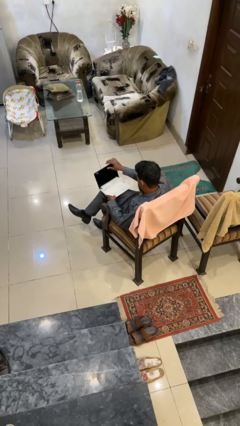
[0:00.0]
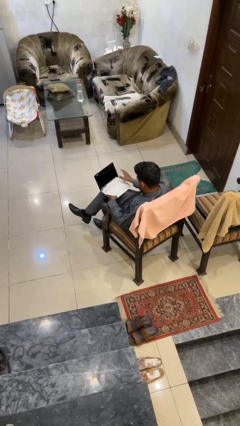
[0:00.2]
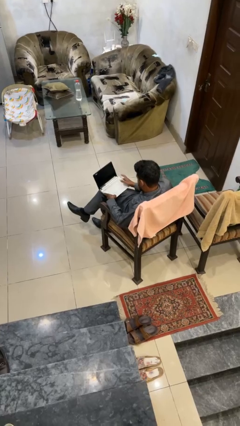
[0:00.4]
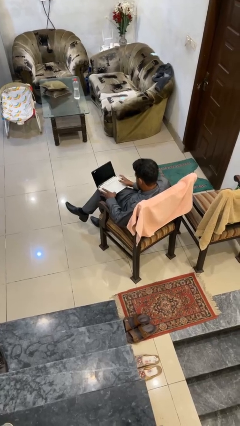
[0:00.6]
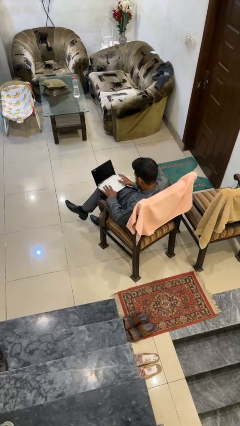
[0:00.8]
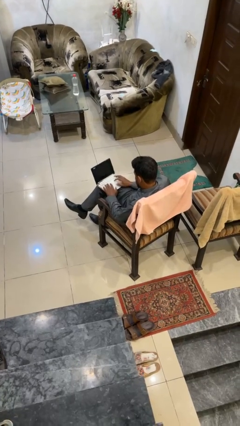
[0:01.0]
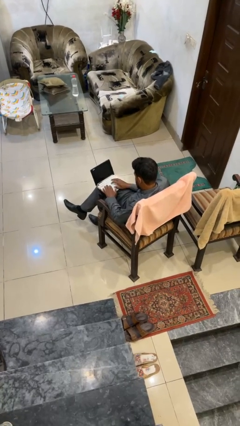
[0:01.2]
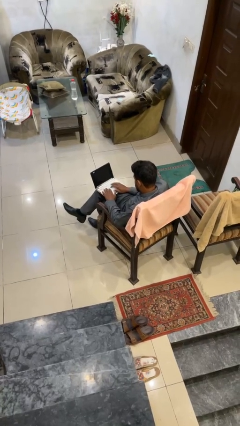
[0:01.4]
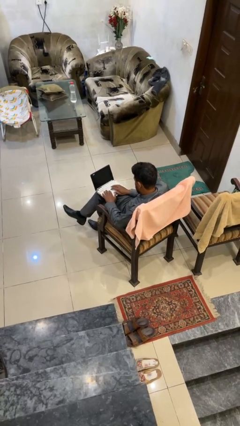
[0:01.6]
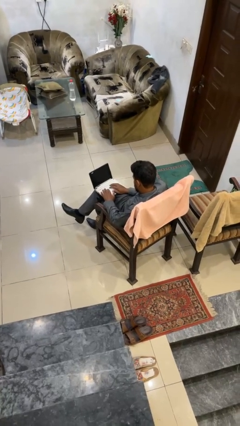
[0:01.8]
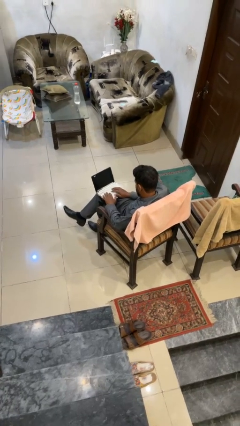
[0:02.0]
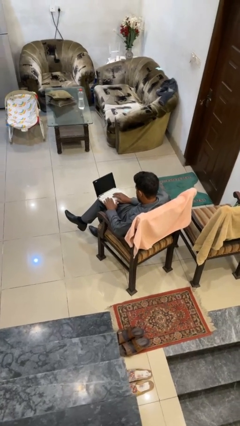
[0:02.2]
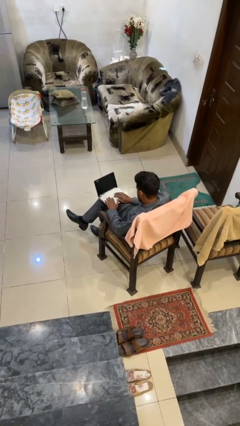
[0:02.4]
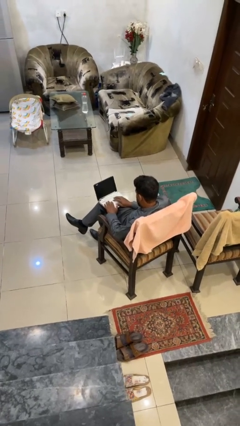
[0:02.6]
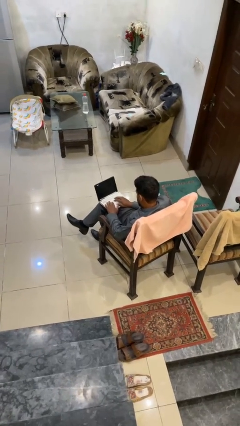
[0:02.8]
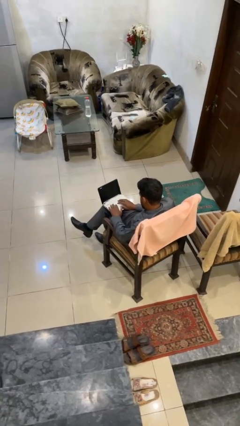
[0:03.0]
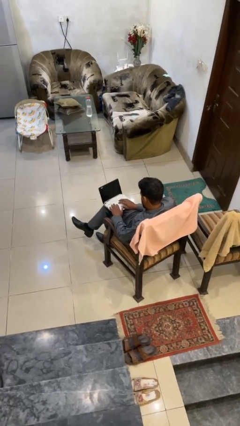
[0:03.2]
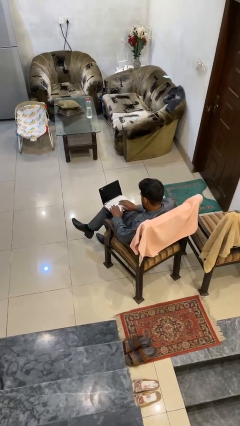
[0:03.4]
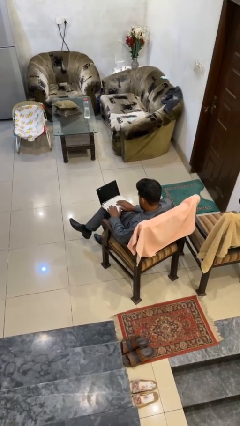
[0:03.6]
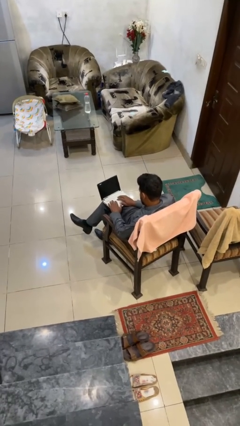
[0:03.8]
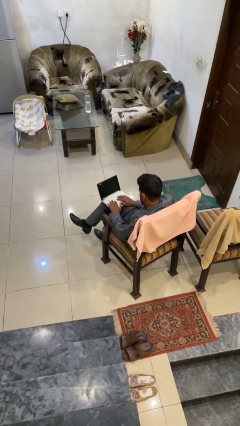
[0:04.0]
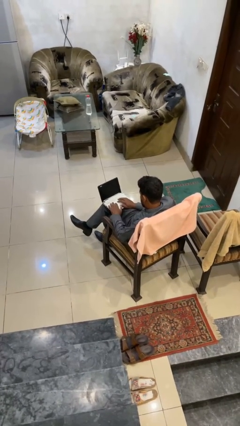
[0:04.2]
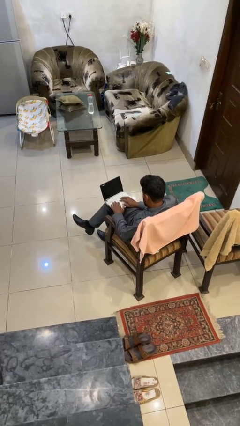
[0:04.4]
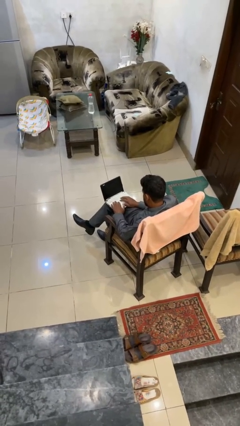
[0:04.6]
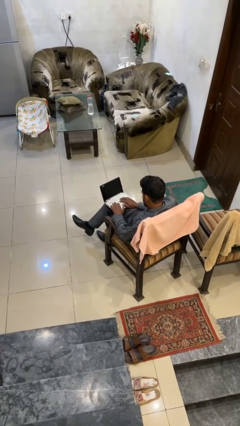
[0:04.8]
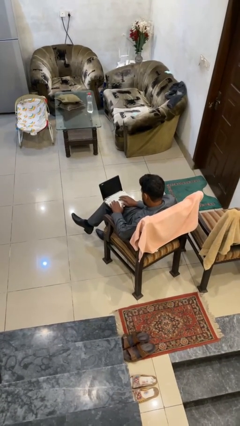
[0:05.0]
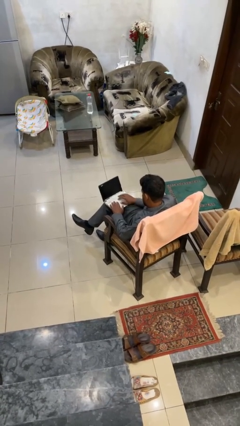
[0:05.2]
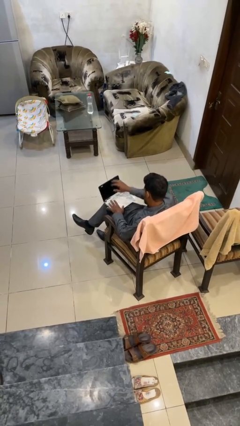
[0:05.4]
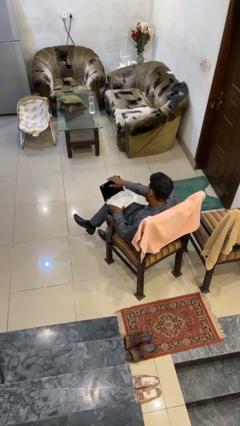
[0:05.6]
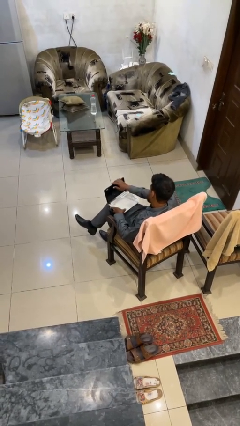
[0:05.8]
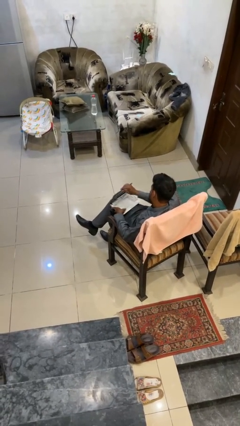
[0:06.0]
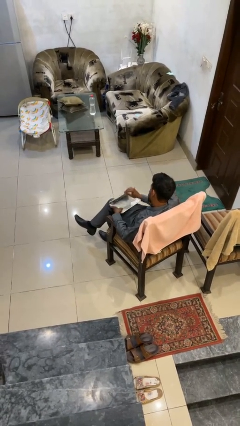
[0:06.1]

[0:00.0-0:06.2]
person interacts with laptop

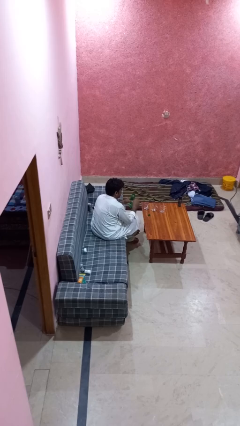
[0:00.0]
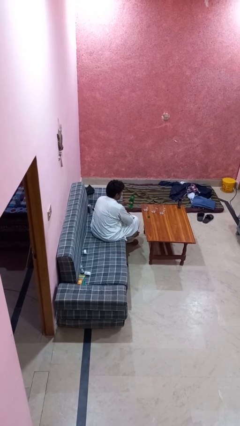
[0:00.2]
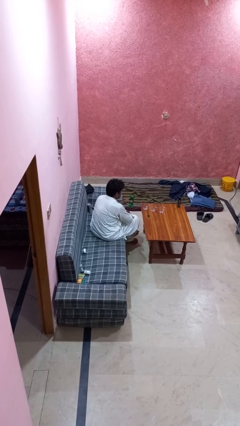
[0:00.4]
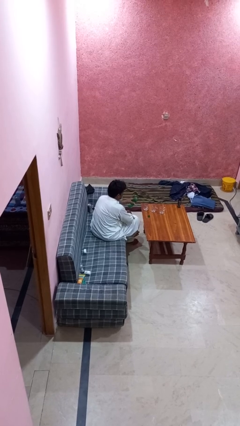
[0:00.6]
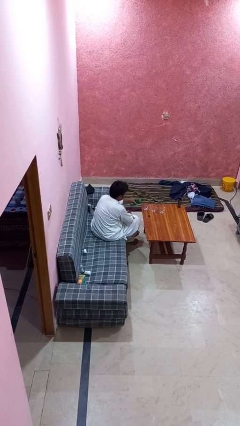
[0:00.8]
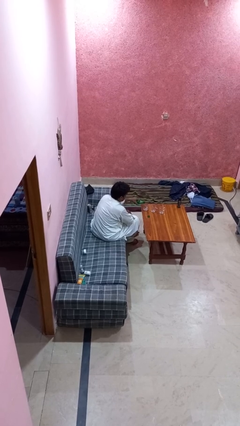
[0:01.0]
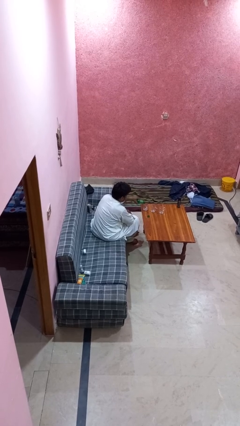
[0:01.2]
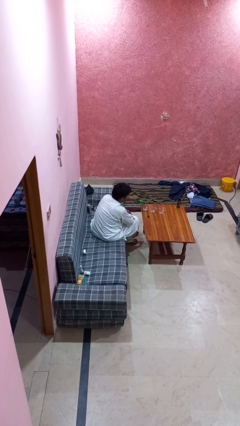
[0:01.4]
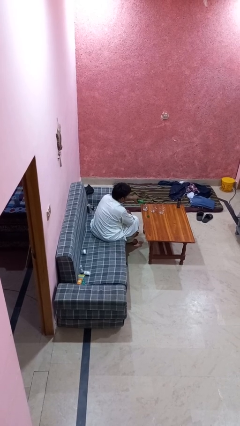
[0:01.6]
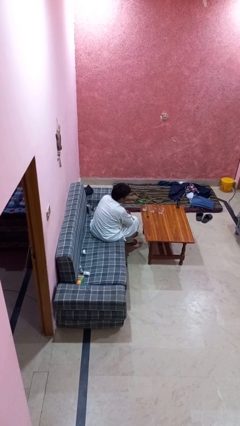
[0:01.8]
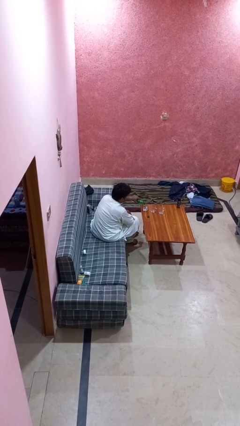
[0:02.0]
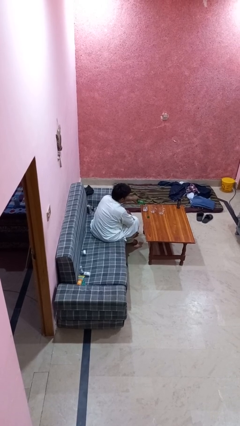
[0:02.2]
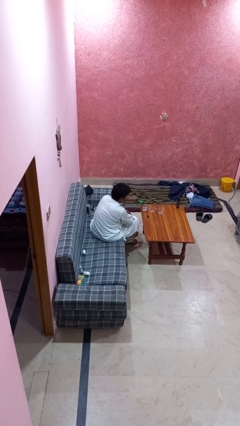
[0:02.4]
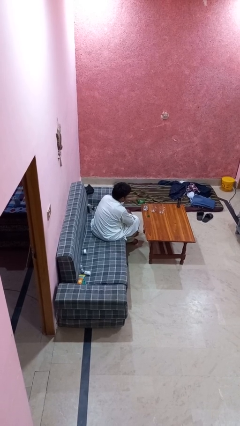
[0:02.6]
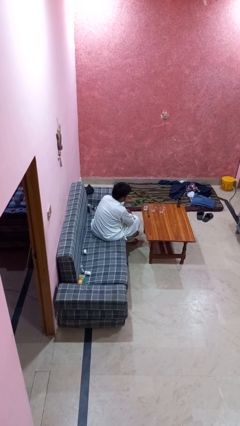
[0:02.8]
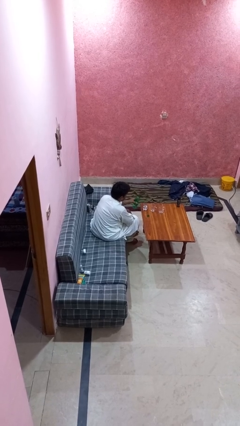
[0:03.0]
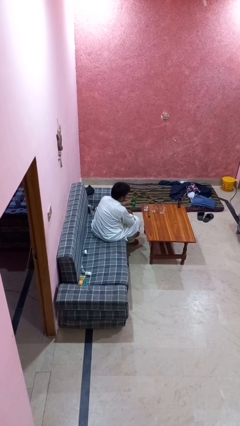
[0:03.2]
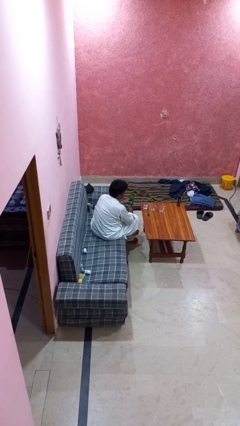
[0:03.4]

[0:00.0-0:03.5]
person pours liquid into cup

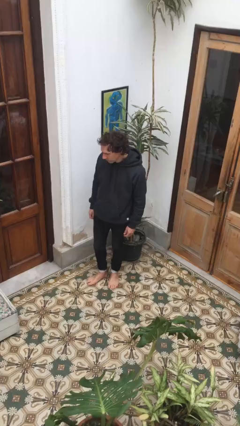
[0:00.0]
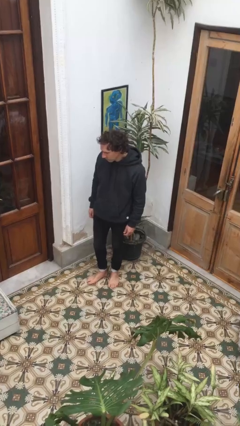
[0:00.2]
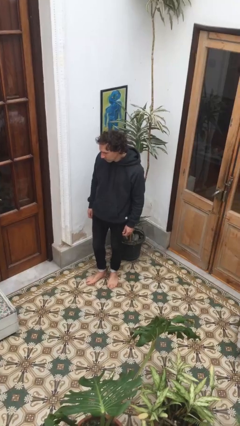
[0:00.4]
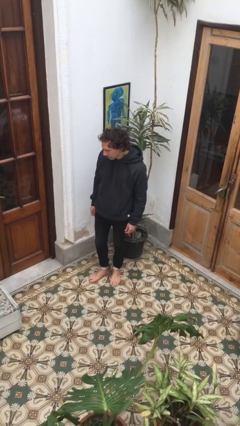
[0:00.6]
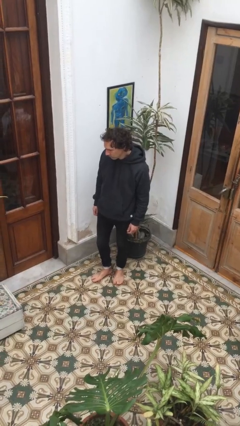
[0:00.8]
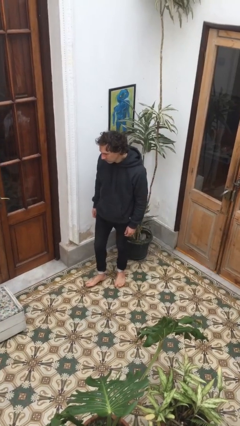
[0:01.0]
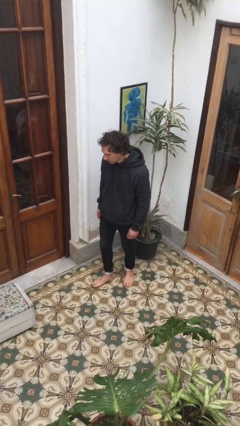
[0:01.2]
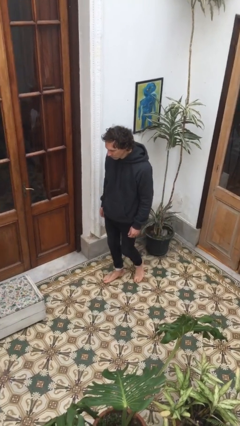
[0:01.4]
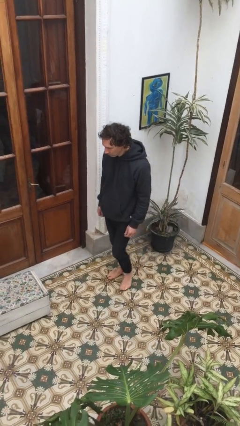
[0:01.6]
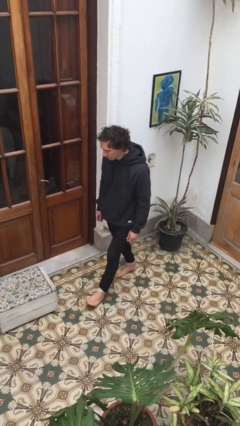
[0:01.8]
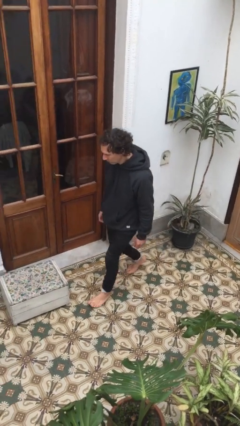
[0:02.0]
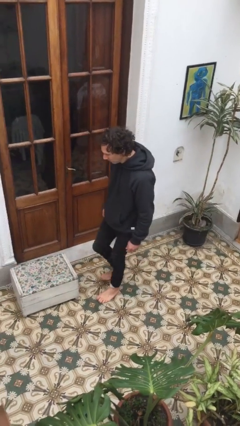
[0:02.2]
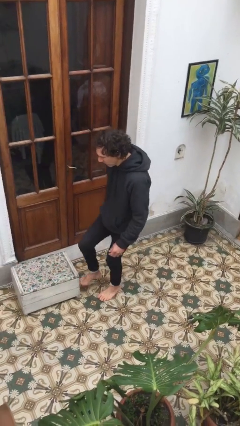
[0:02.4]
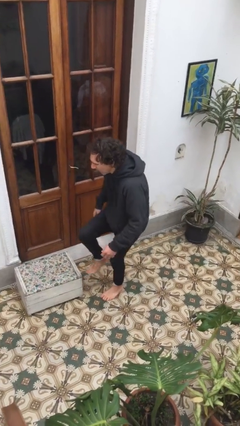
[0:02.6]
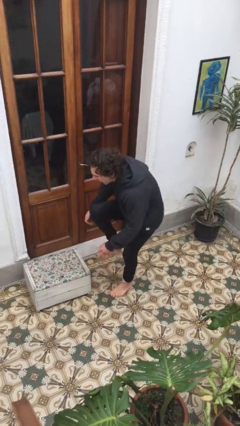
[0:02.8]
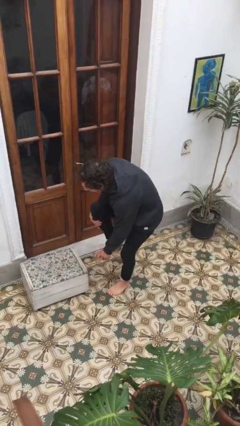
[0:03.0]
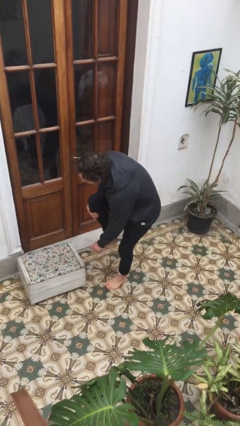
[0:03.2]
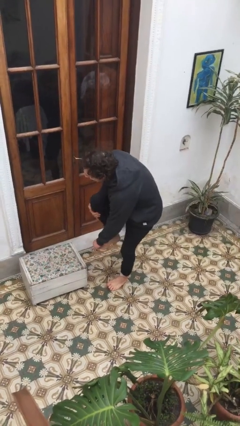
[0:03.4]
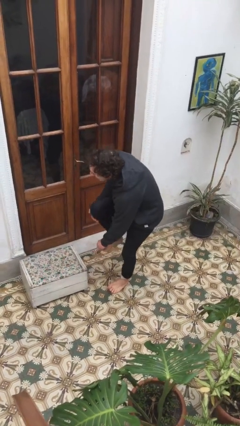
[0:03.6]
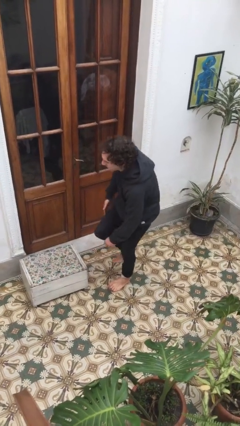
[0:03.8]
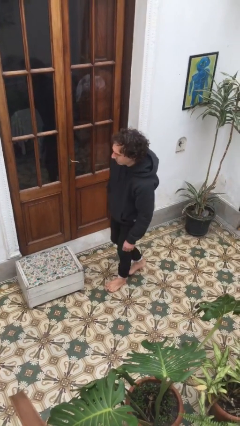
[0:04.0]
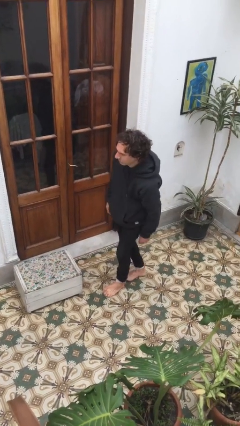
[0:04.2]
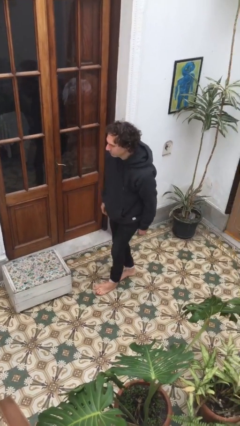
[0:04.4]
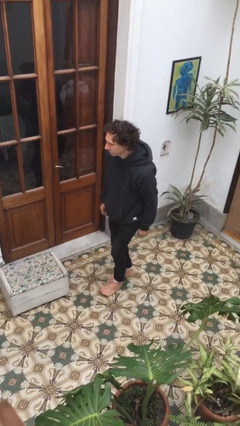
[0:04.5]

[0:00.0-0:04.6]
person stubs toe

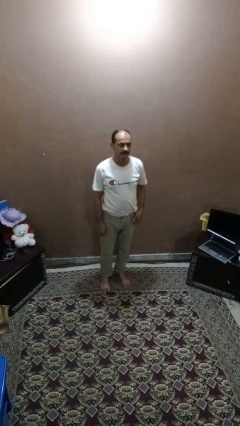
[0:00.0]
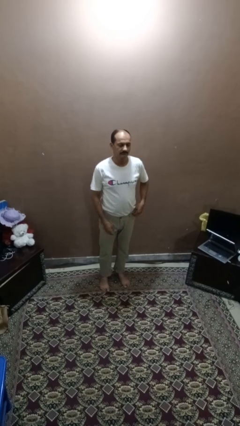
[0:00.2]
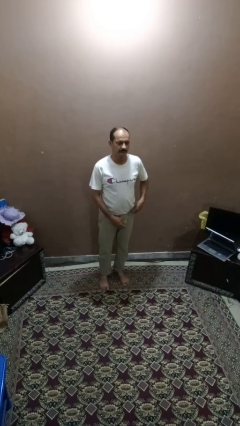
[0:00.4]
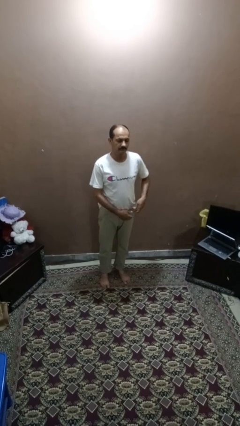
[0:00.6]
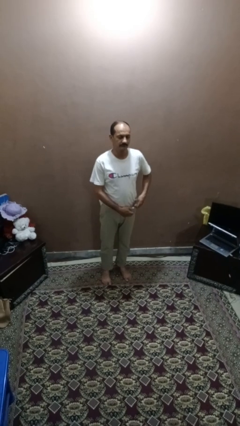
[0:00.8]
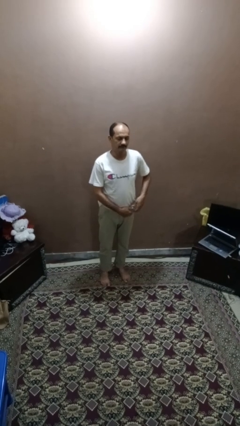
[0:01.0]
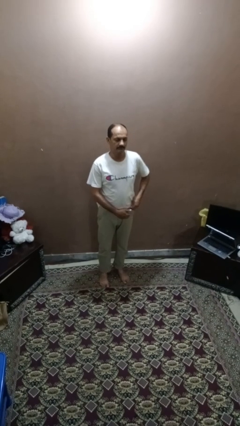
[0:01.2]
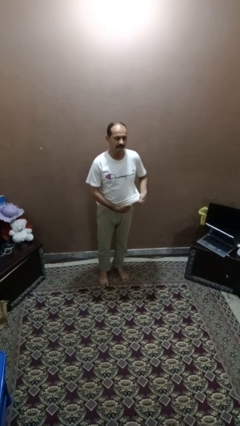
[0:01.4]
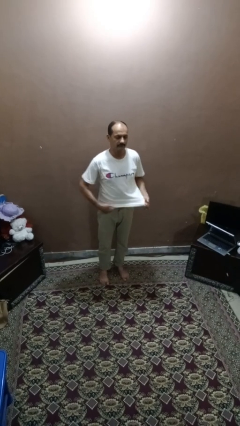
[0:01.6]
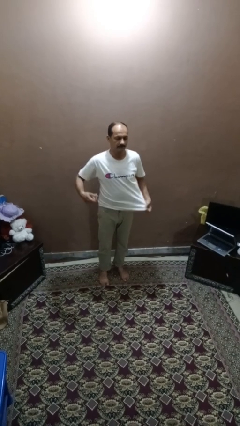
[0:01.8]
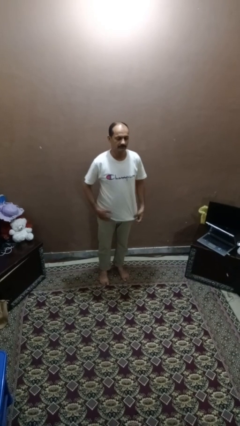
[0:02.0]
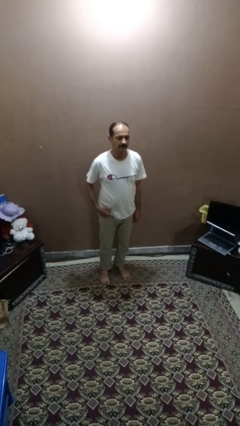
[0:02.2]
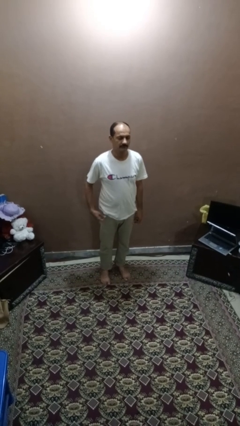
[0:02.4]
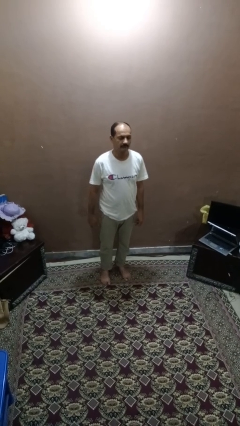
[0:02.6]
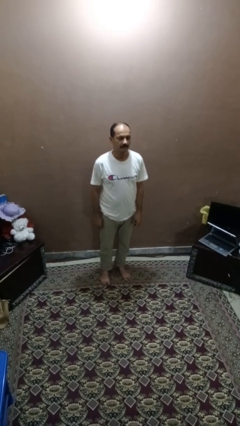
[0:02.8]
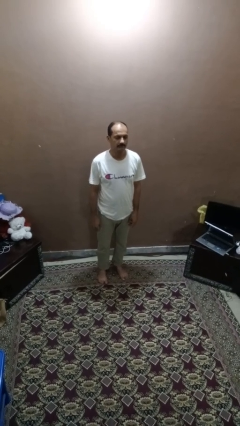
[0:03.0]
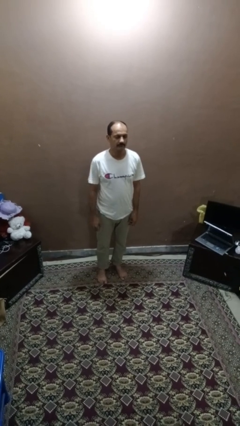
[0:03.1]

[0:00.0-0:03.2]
person untucks shirt

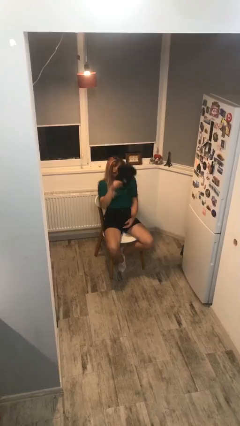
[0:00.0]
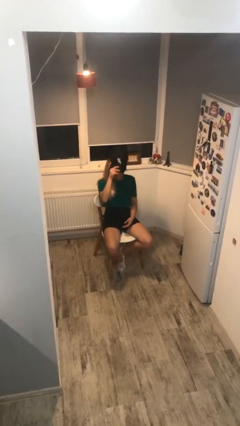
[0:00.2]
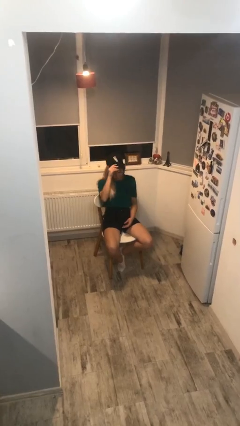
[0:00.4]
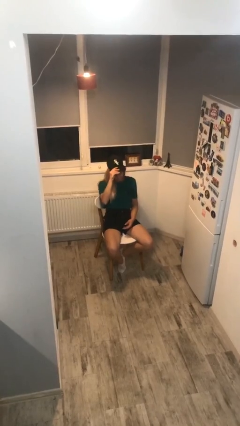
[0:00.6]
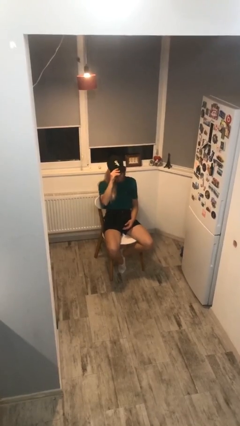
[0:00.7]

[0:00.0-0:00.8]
person puts on hat
